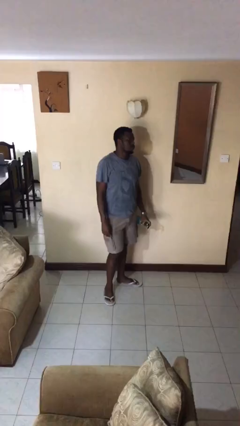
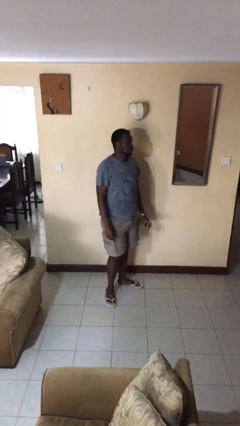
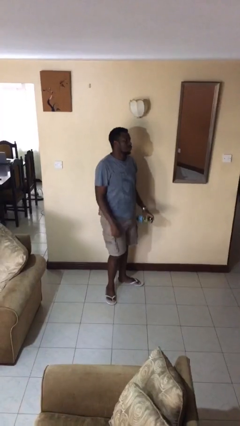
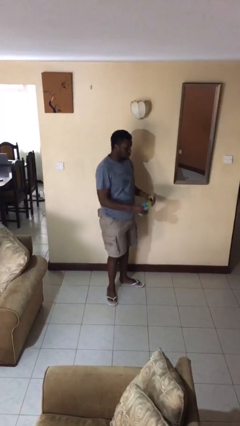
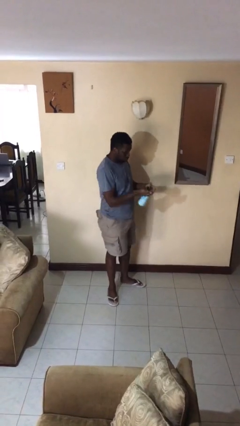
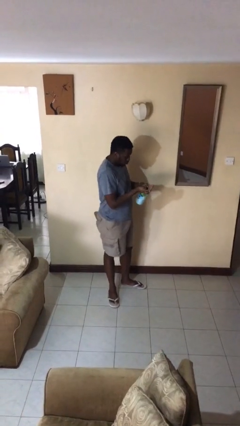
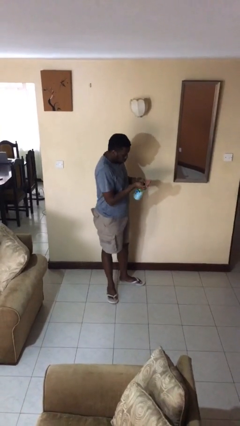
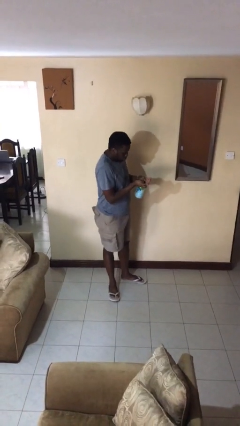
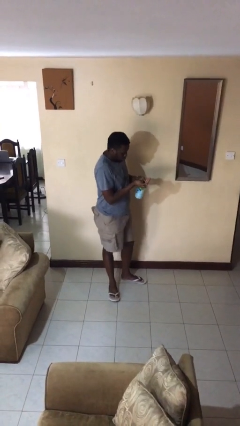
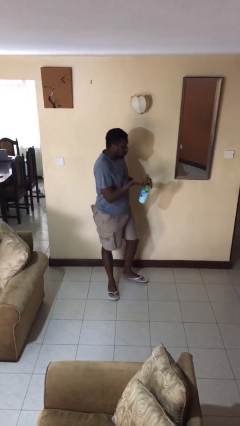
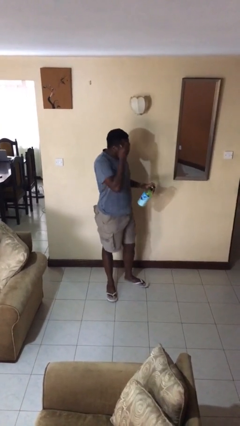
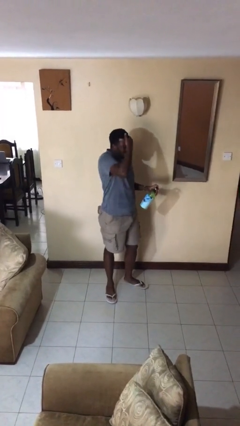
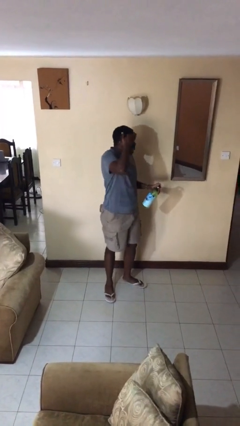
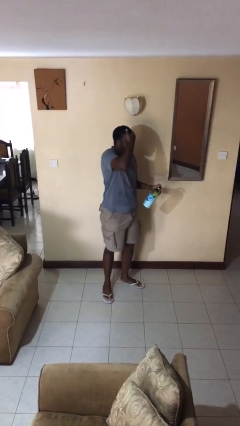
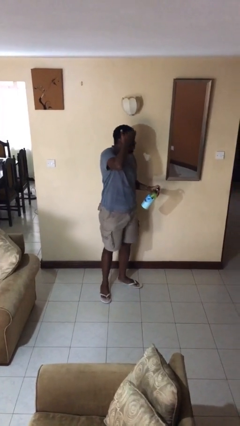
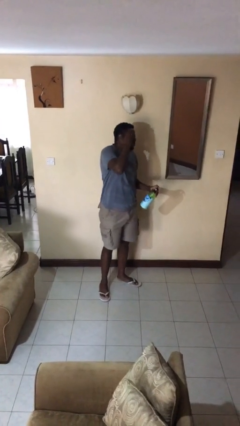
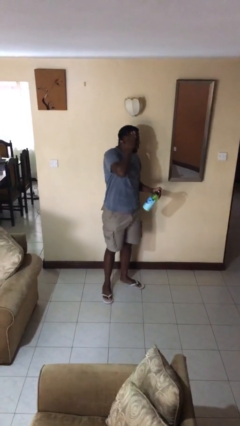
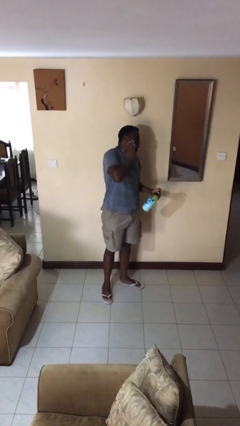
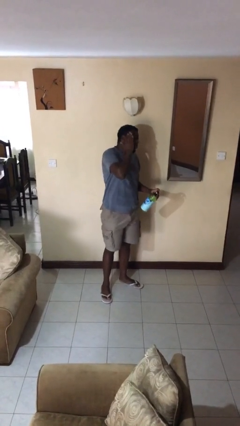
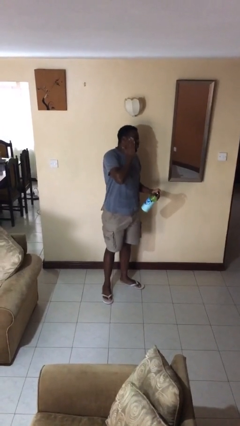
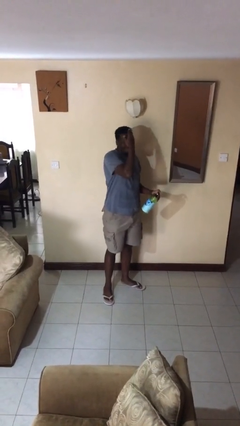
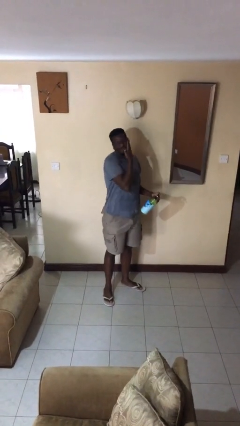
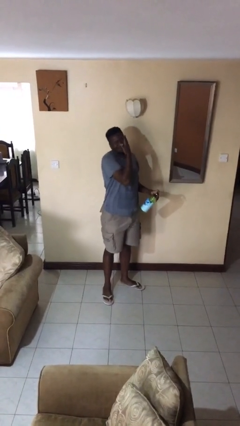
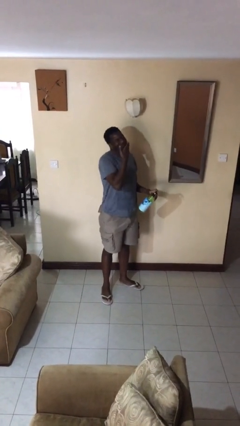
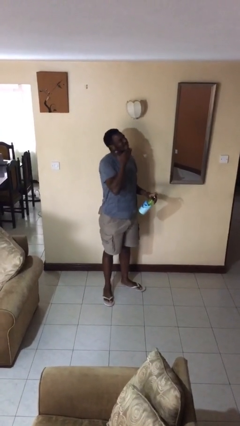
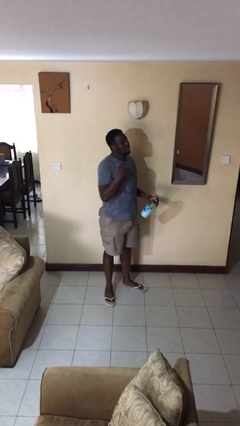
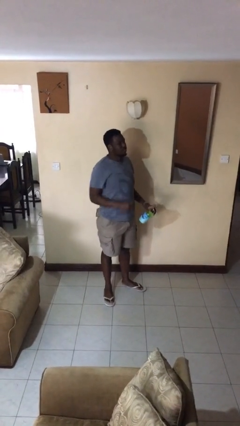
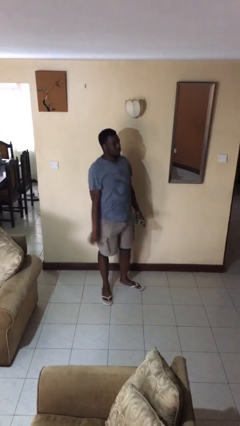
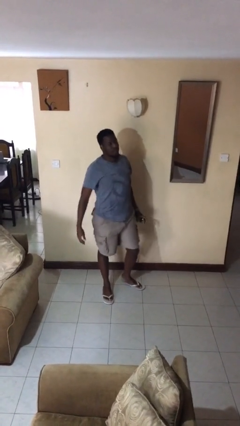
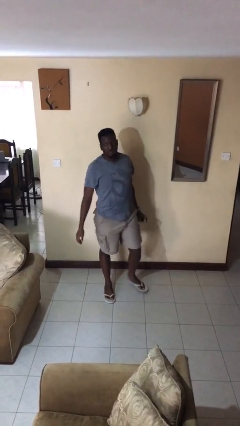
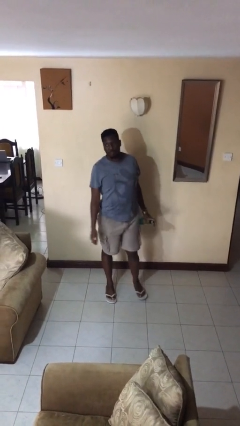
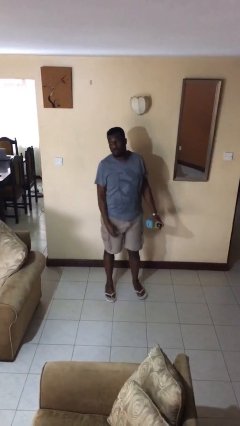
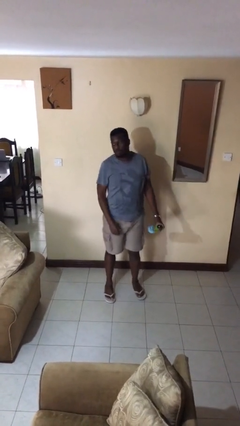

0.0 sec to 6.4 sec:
person applies sunscreen

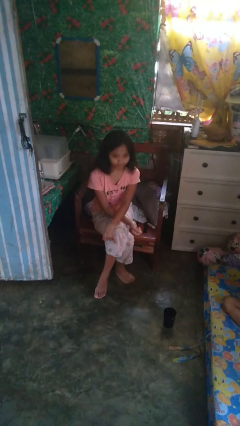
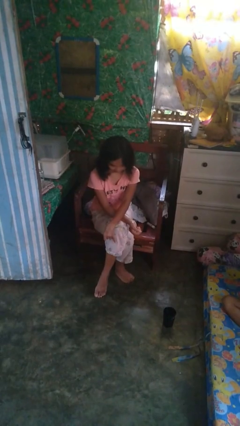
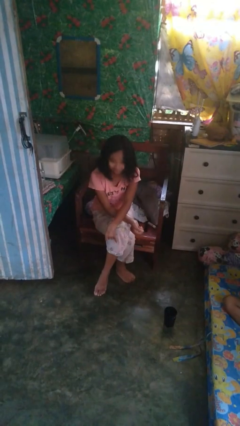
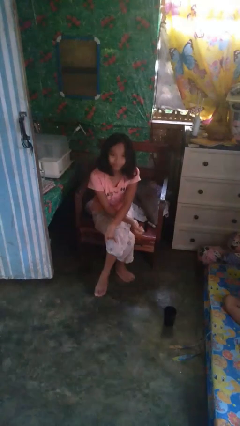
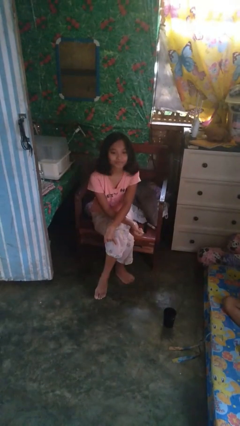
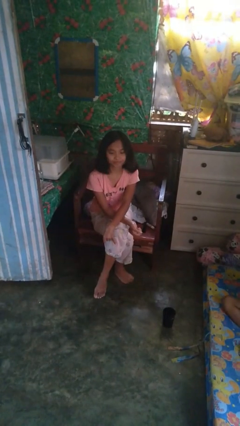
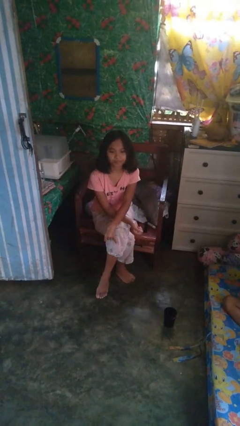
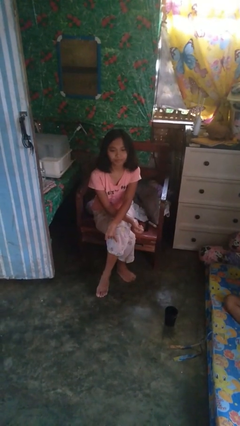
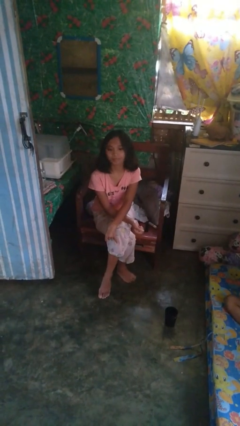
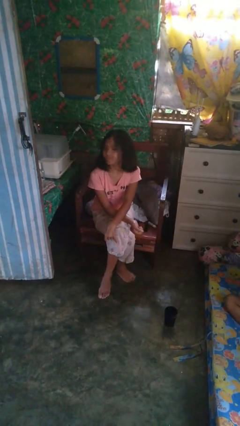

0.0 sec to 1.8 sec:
person nods head

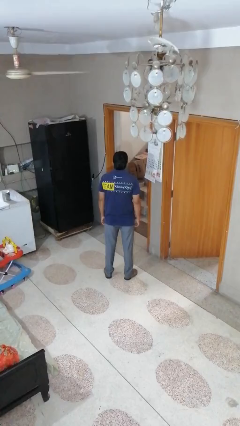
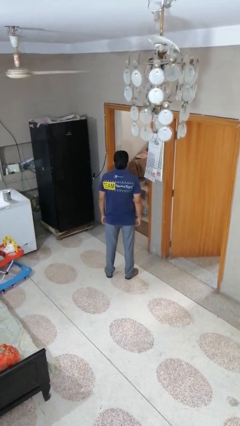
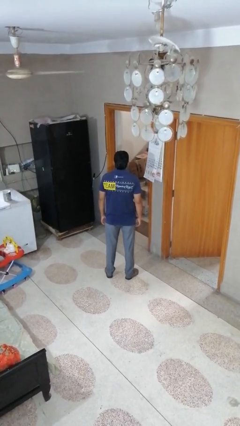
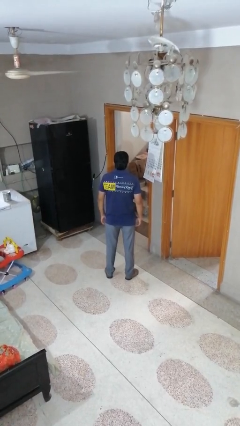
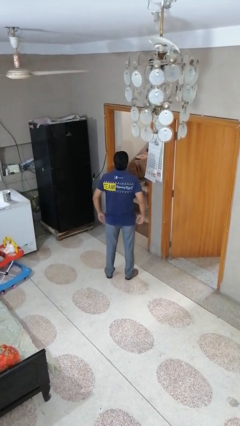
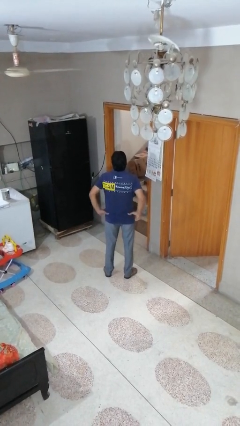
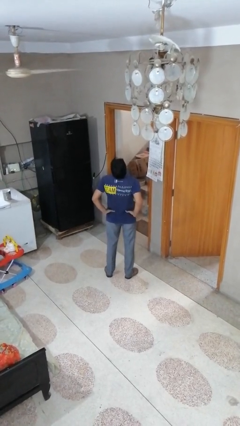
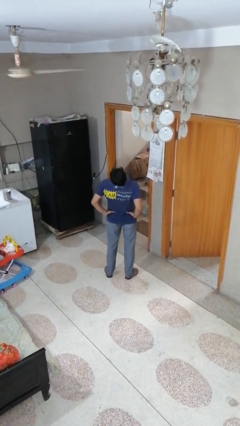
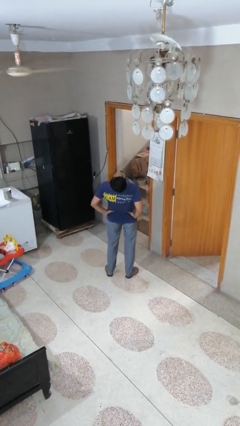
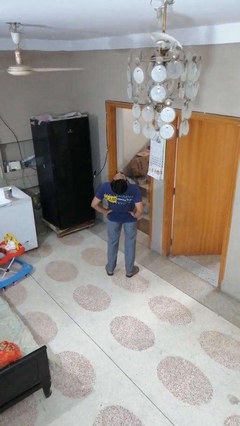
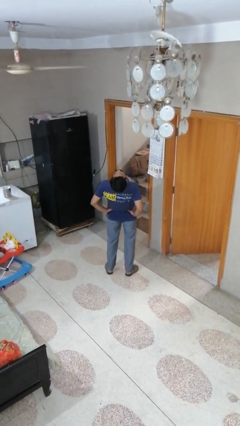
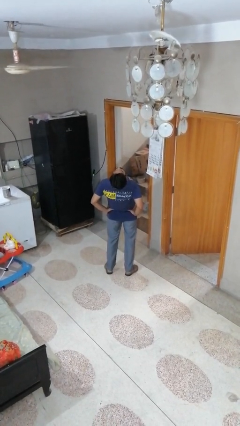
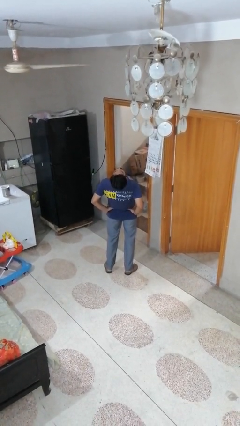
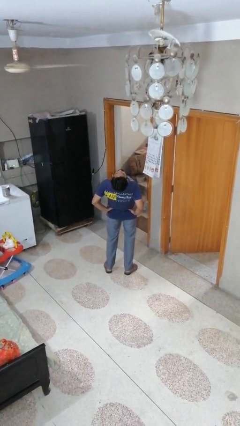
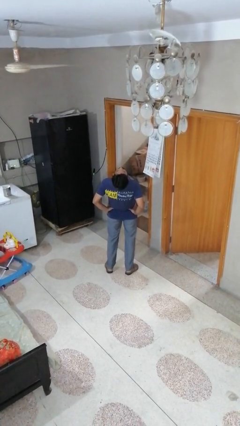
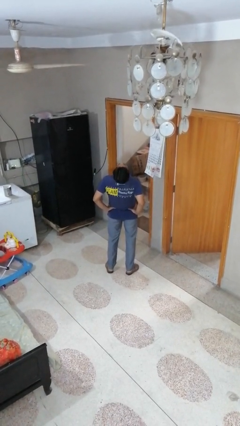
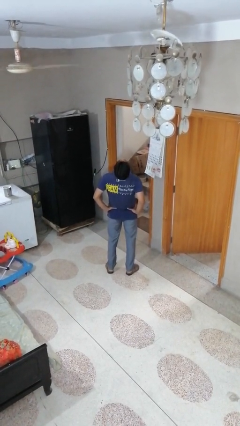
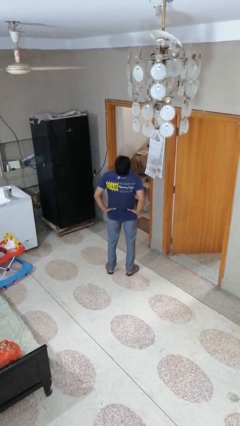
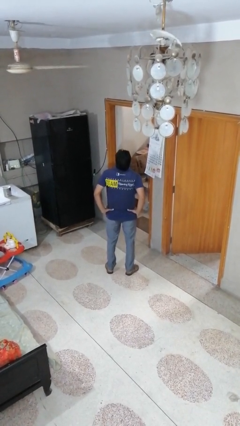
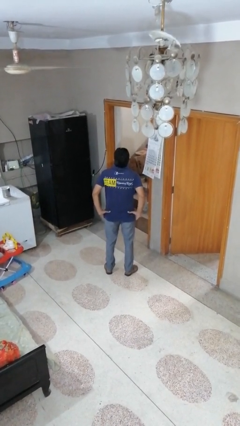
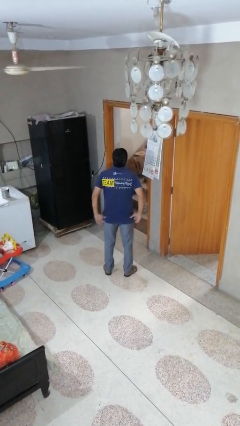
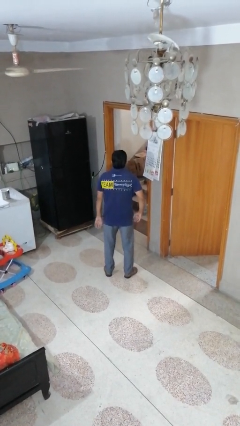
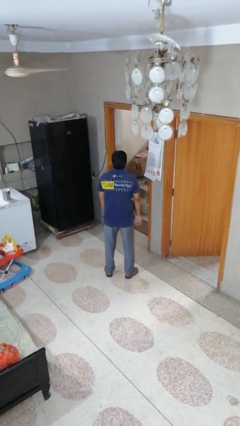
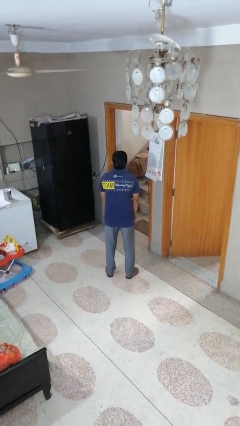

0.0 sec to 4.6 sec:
person stretches back

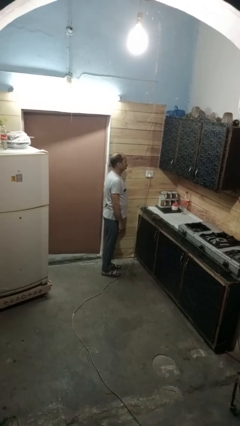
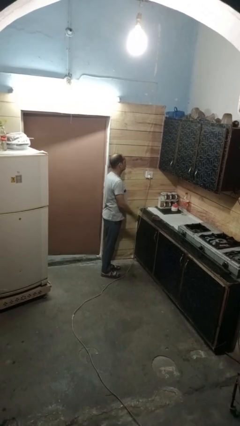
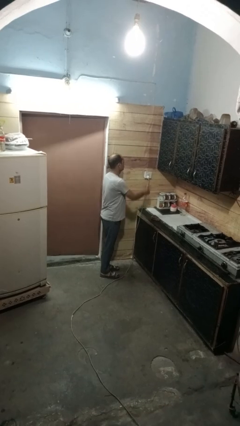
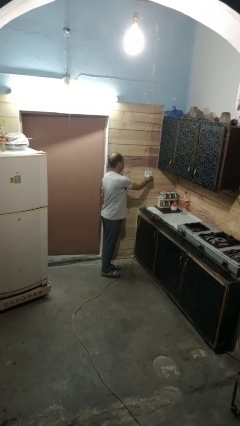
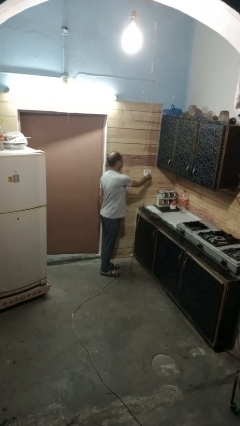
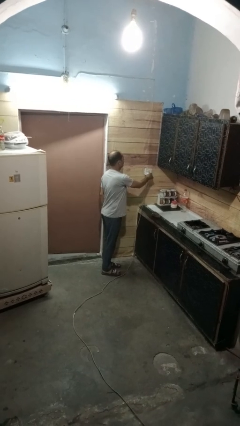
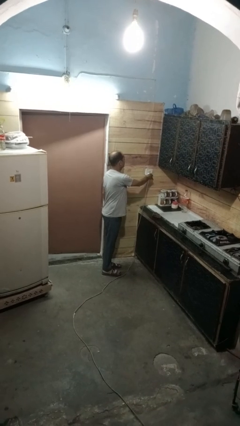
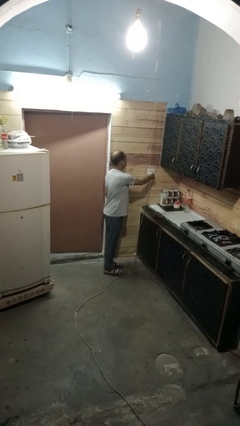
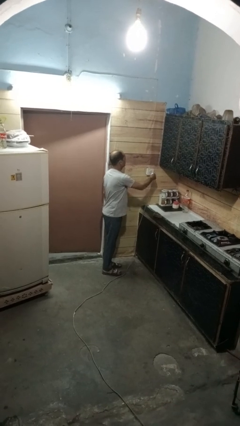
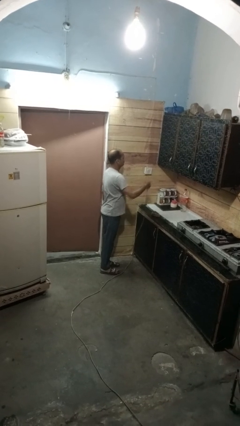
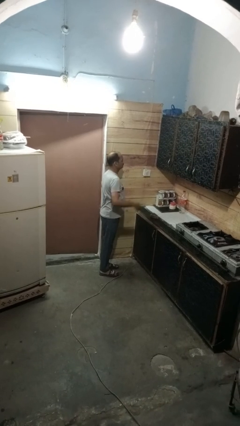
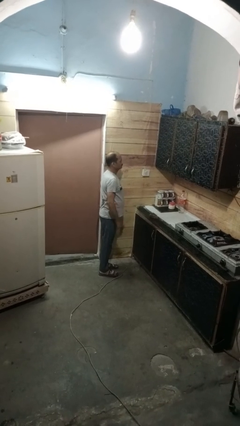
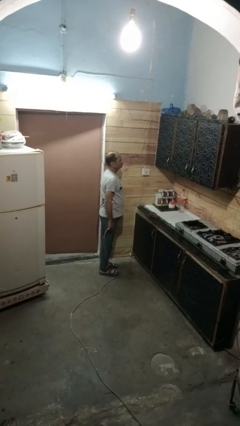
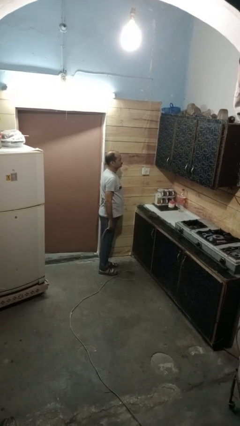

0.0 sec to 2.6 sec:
person unplugs from electrical socket

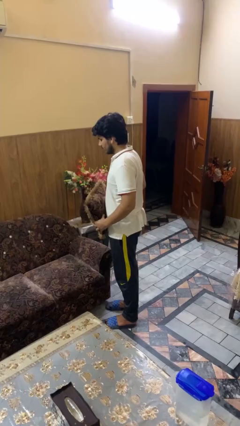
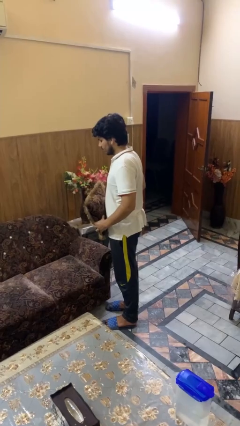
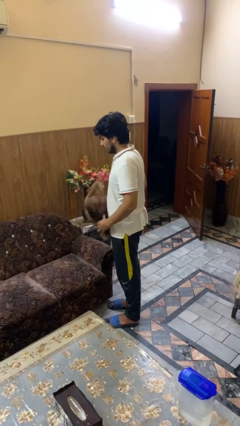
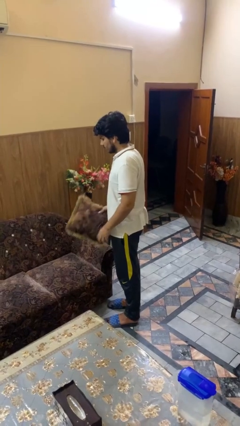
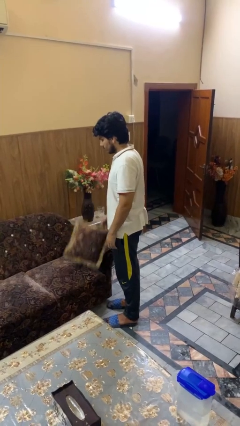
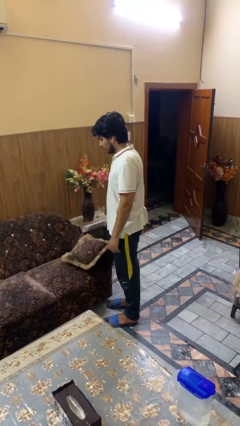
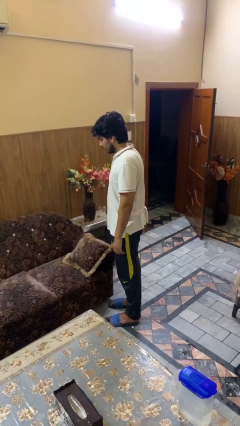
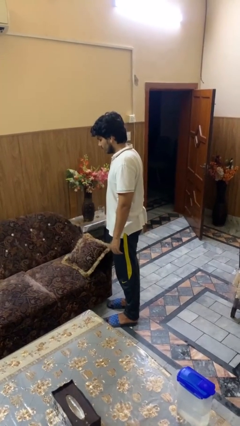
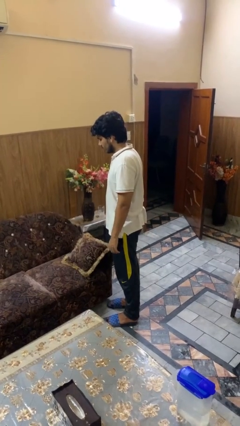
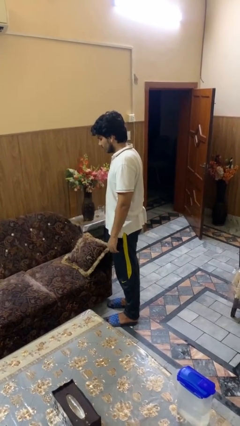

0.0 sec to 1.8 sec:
person puts down object on couch

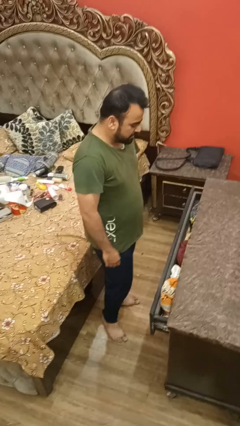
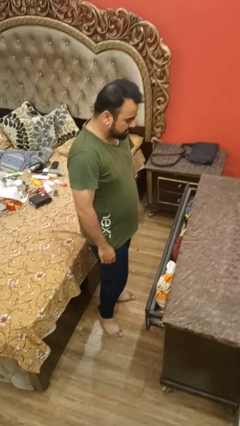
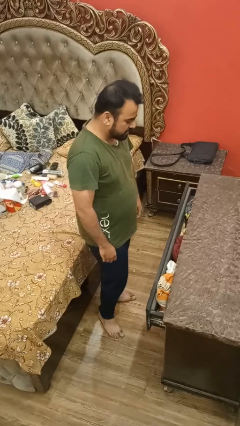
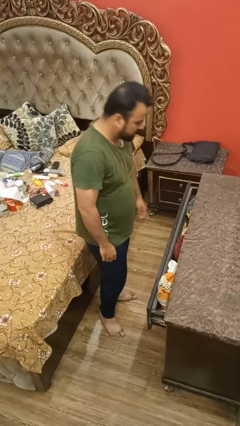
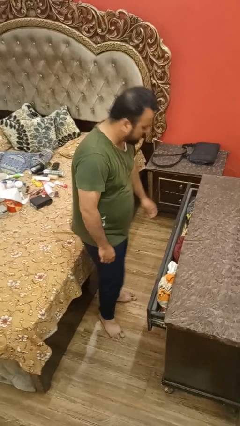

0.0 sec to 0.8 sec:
person puts clothes into dresser
